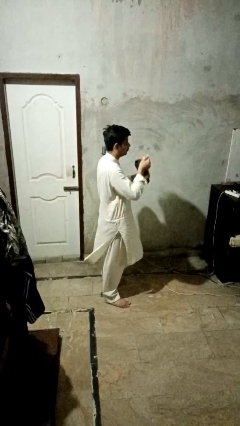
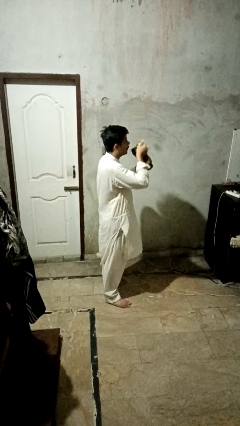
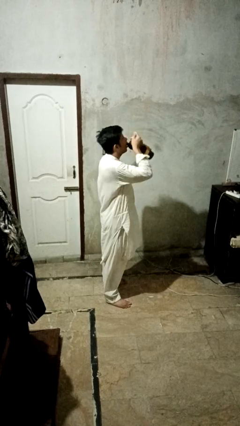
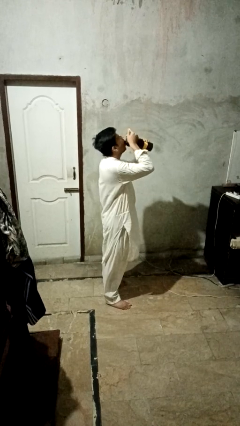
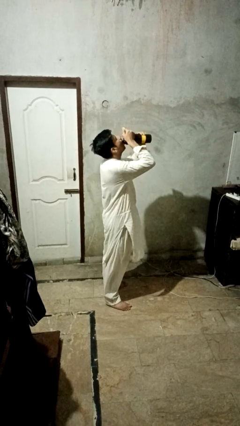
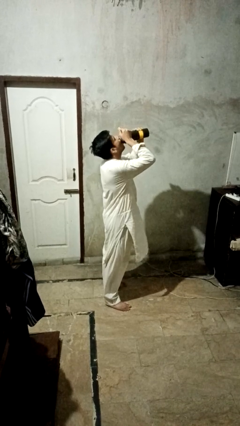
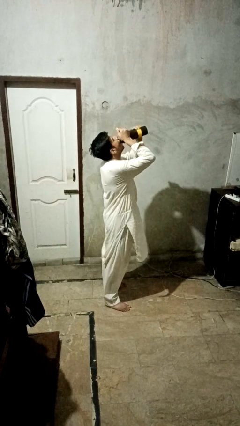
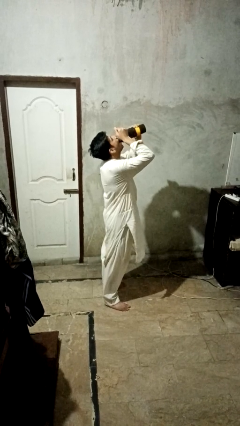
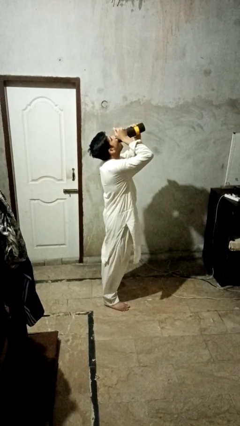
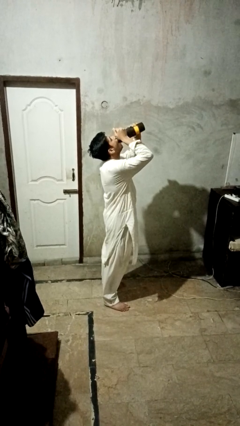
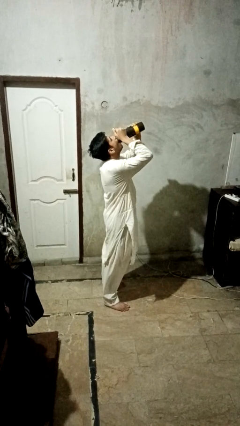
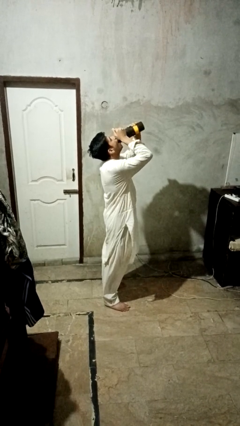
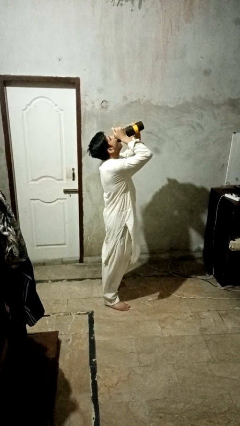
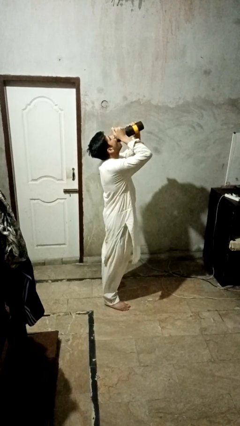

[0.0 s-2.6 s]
person drinks from bottle

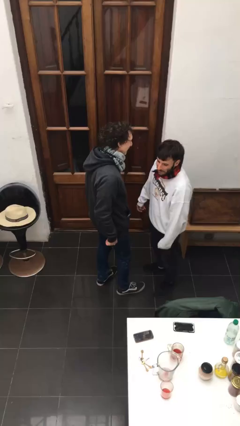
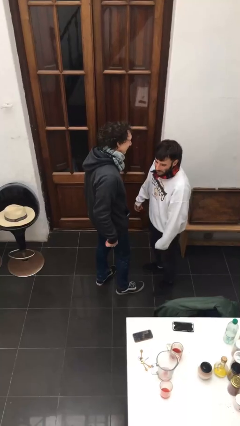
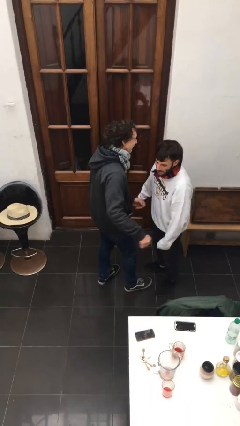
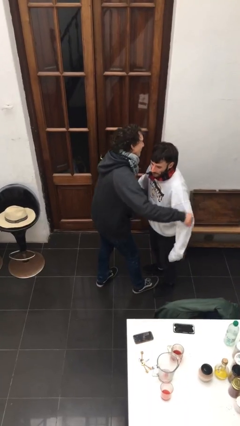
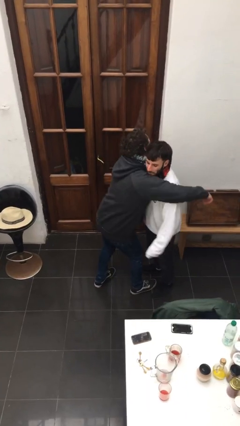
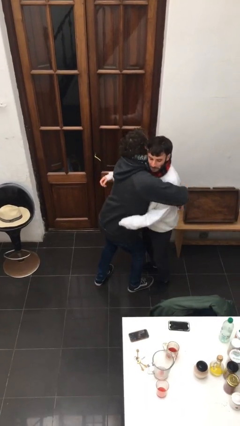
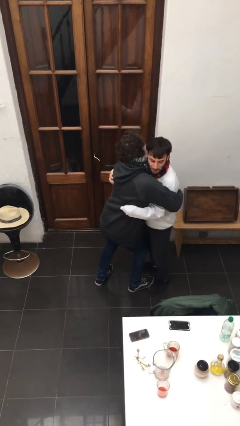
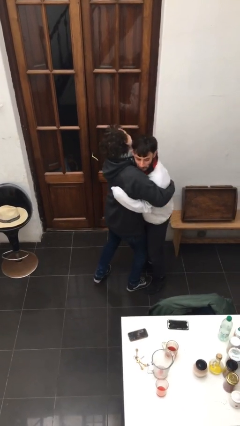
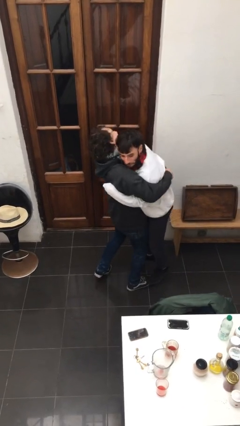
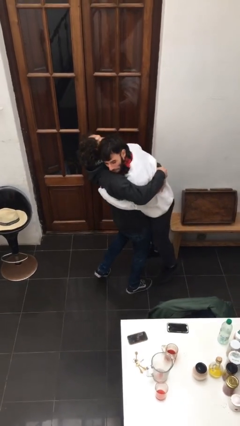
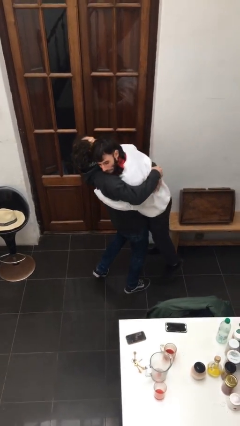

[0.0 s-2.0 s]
person picks up person

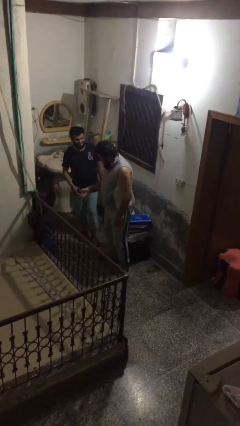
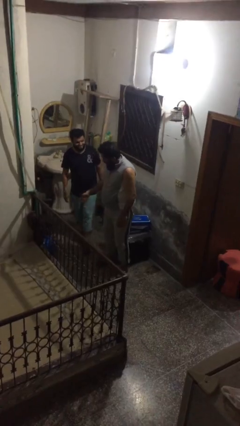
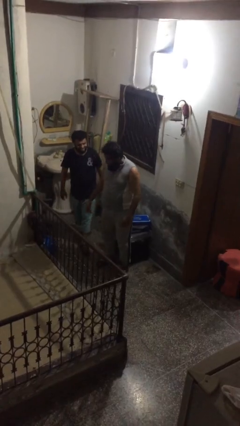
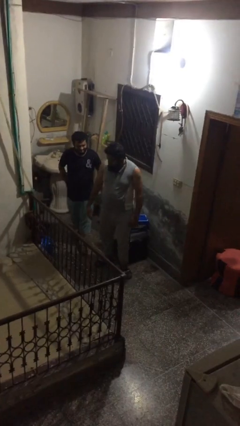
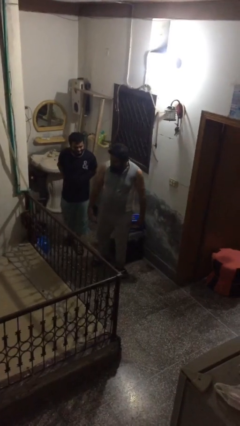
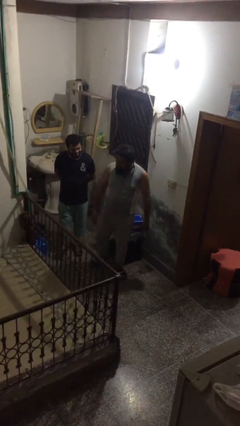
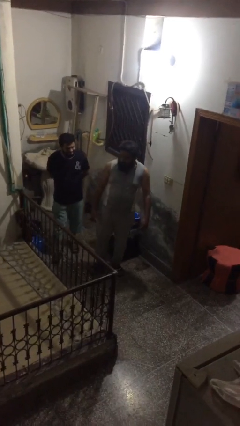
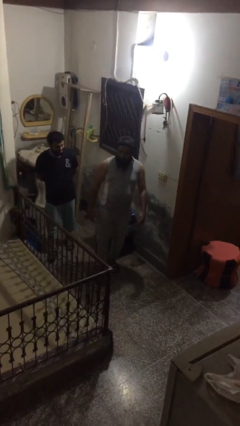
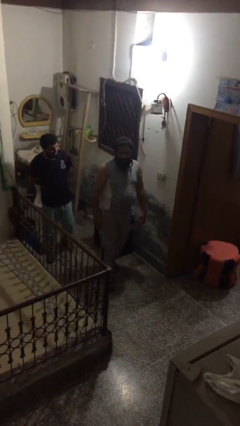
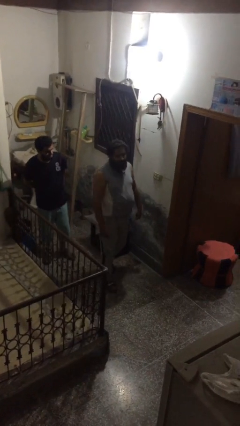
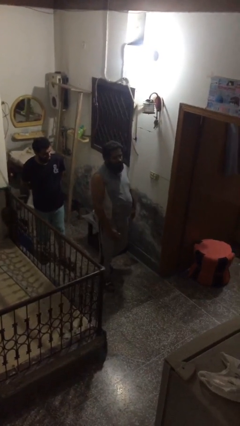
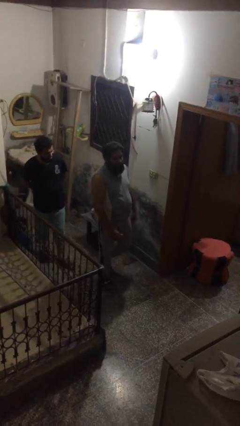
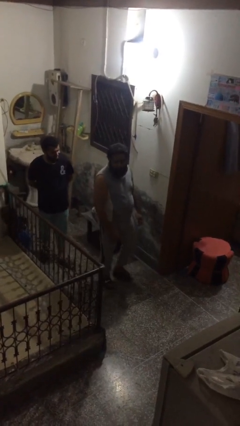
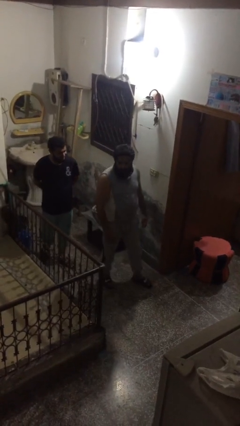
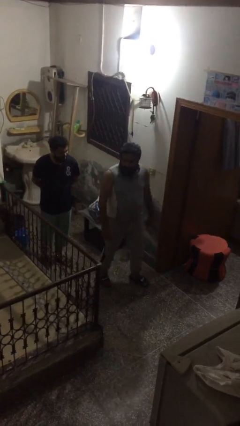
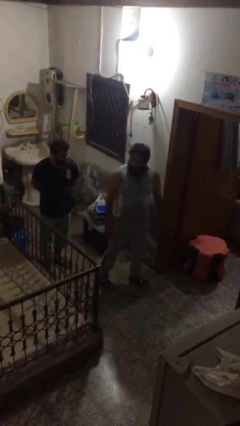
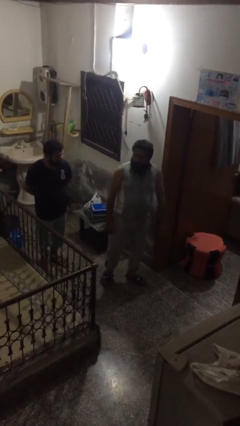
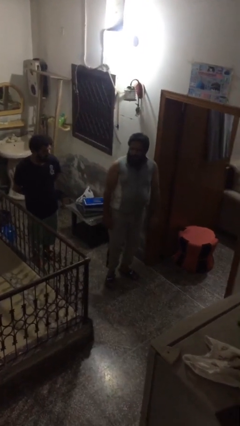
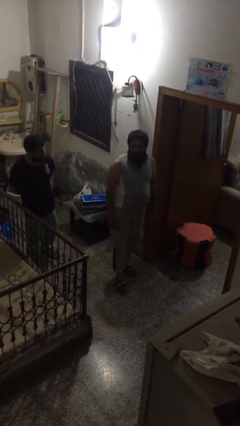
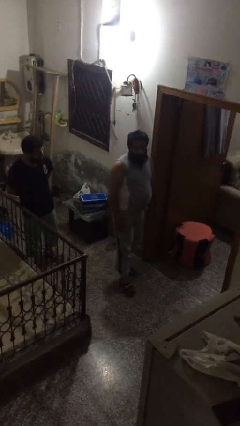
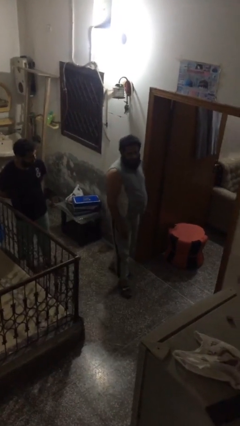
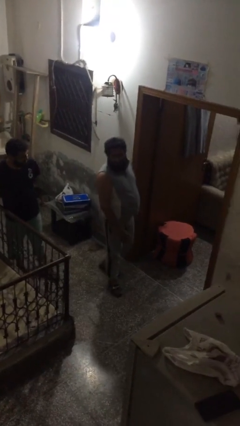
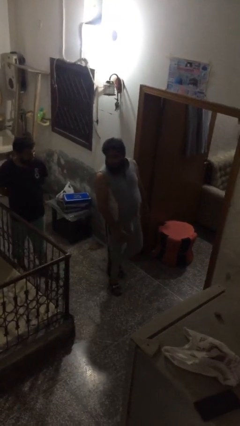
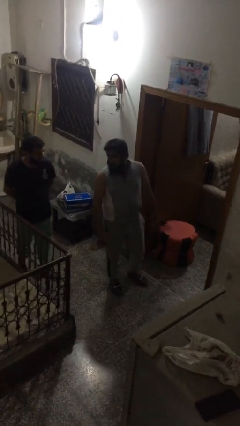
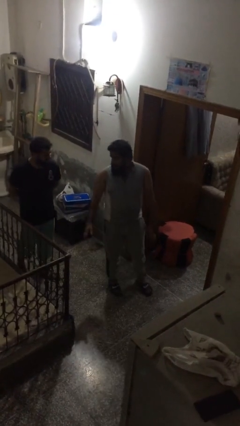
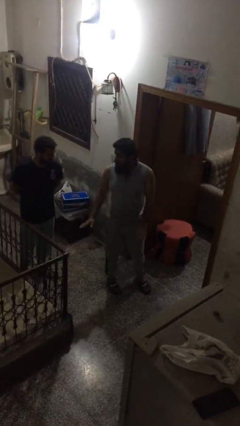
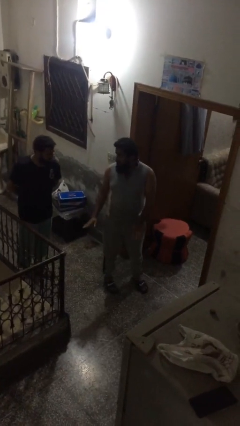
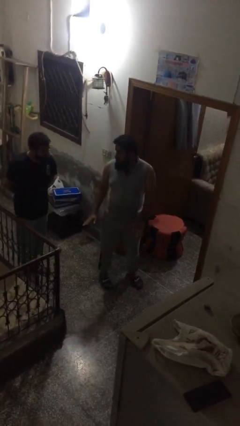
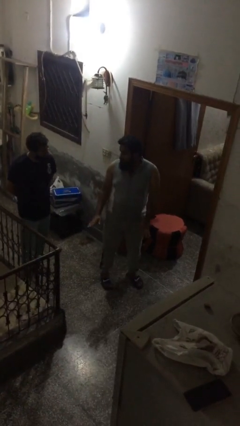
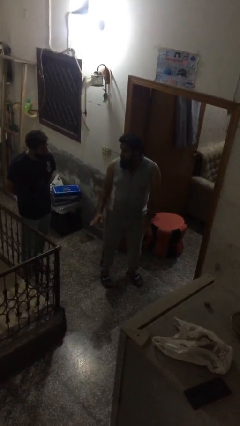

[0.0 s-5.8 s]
person talks to person

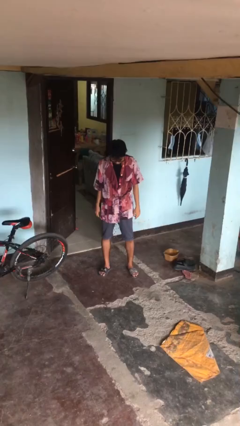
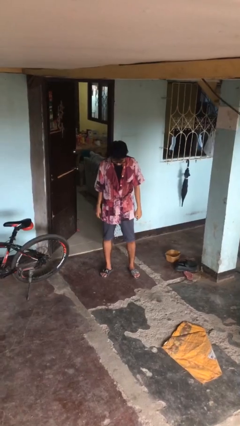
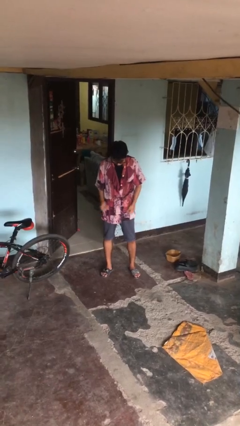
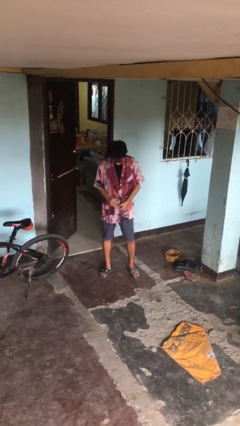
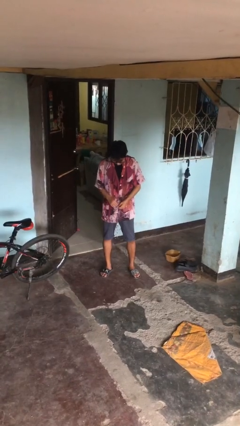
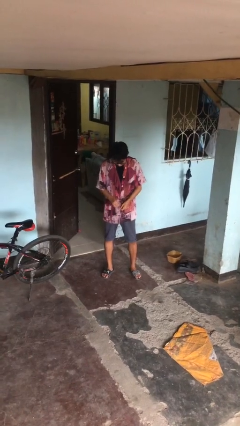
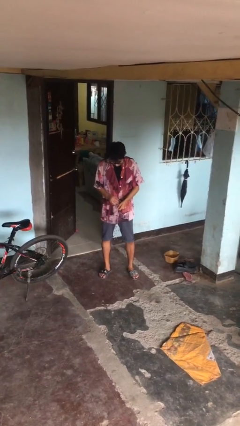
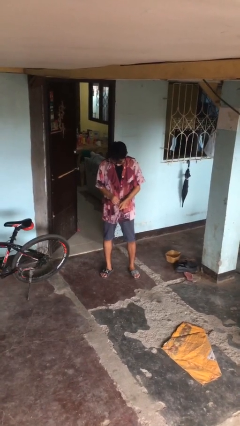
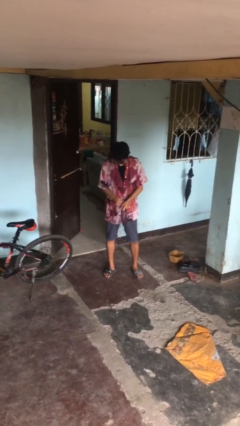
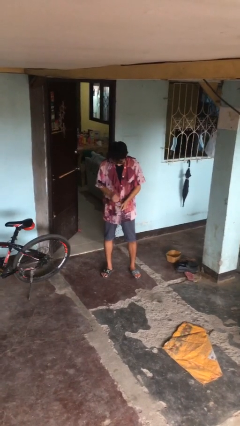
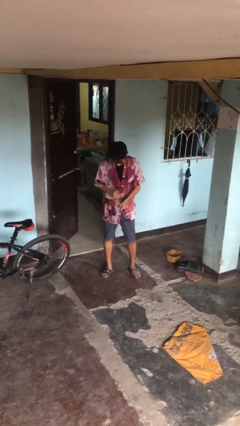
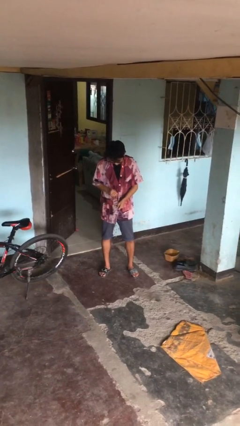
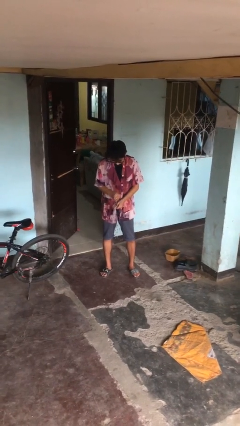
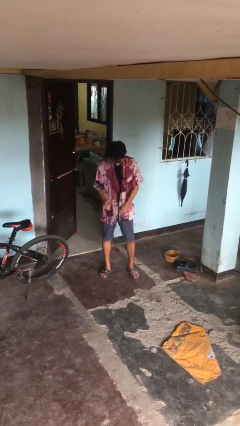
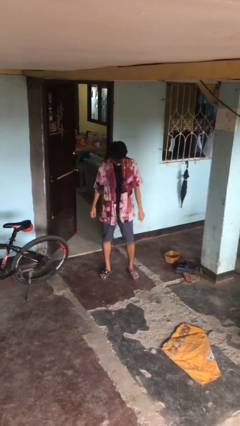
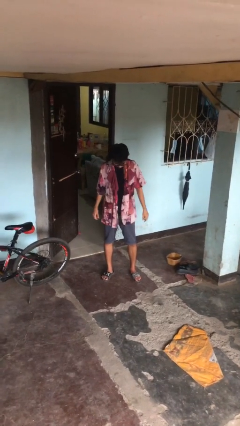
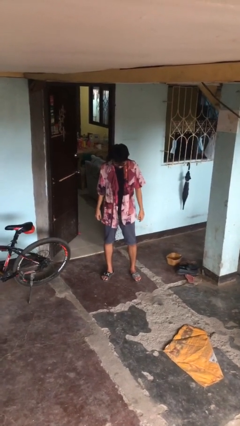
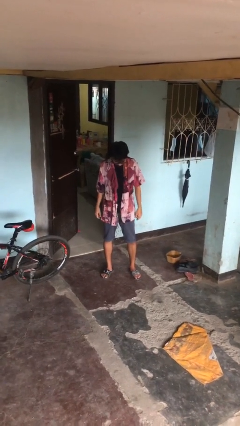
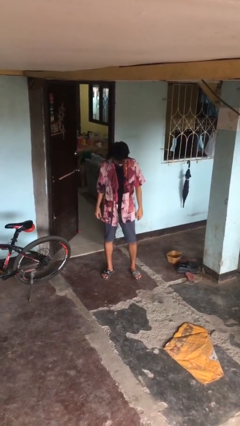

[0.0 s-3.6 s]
person unbuttons shirt

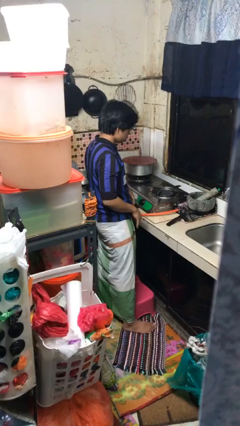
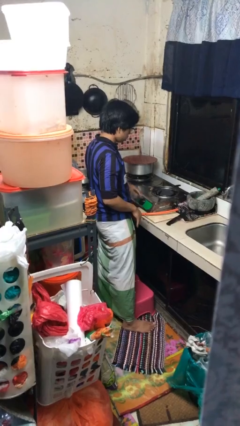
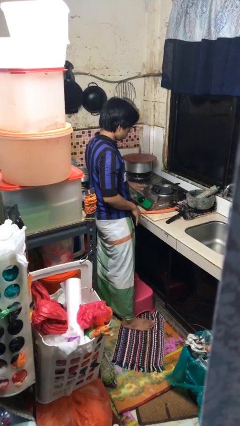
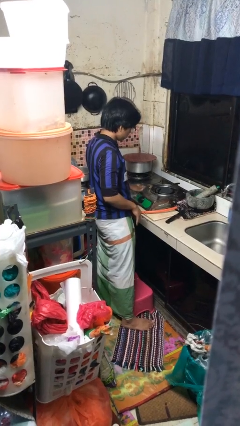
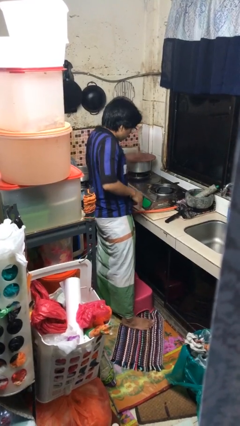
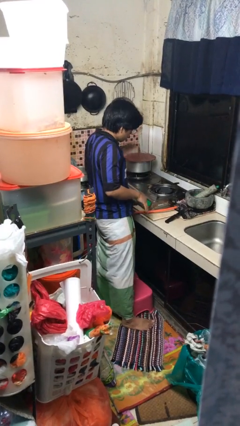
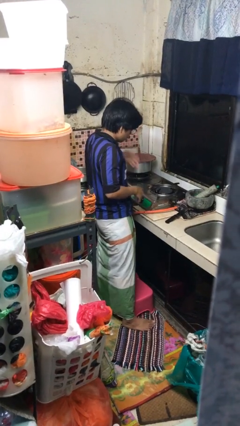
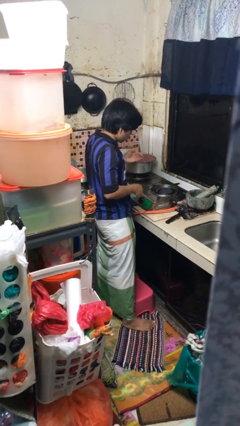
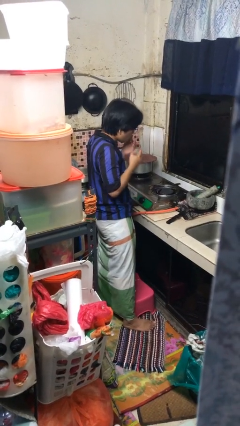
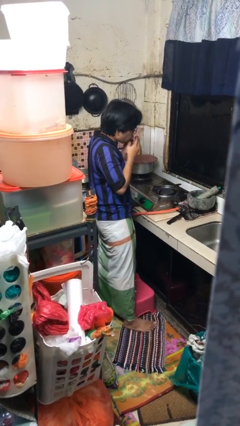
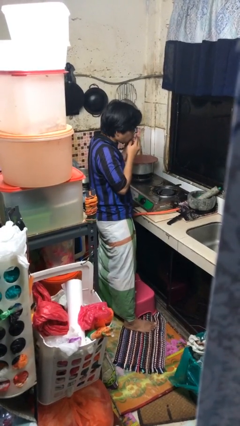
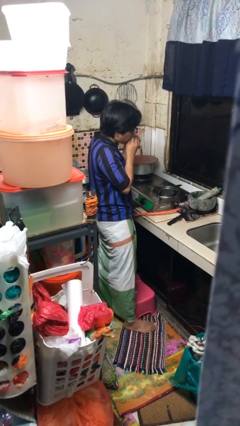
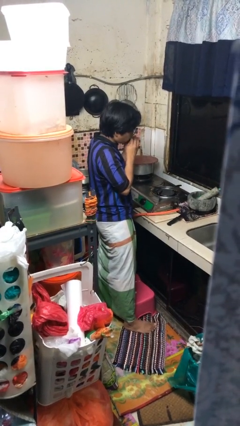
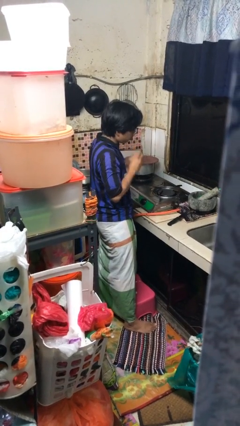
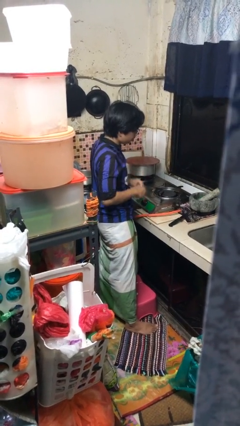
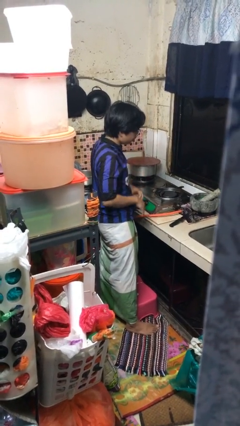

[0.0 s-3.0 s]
person burns hand

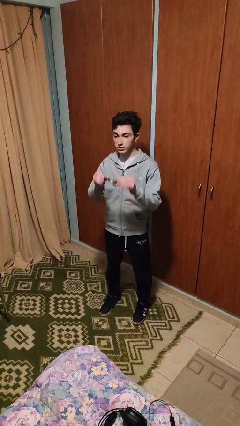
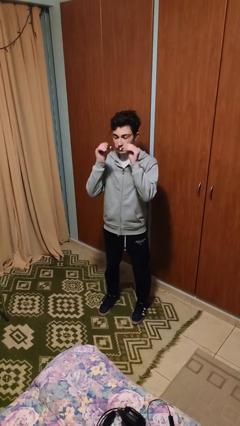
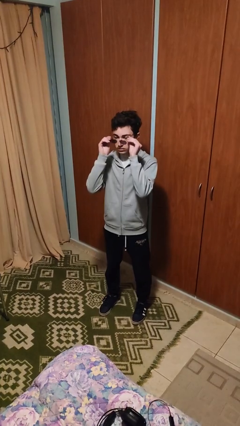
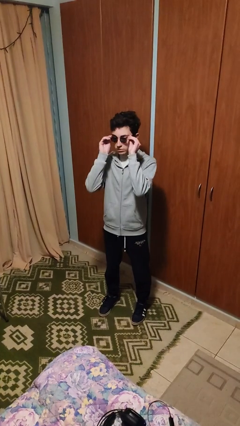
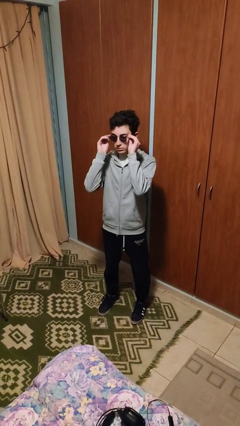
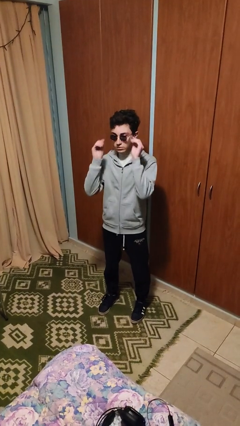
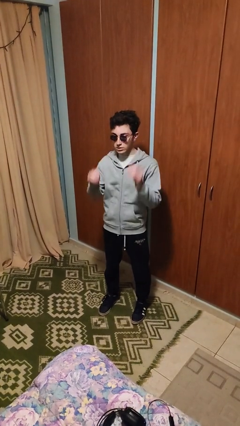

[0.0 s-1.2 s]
person puts on glasses
